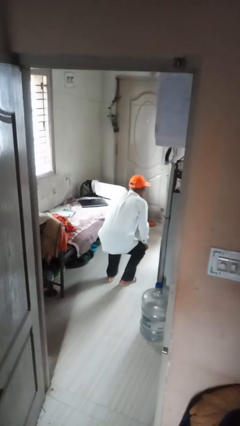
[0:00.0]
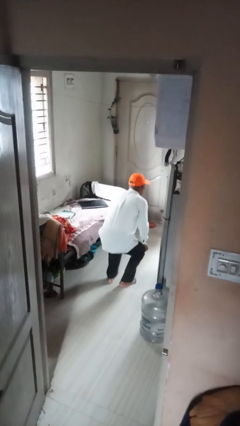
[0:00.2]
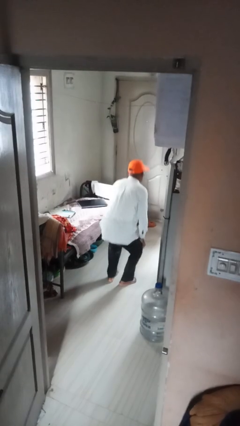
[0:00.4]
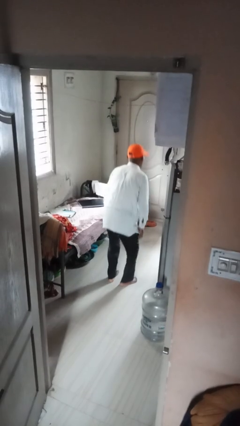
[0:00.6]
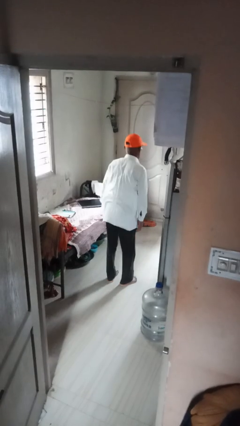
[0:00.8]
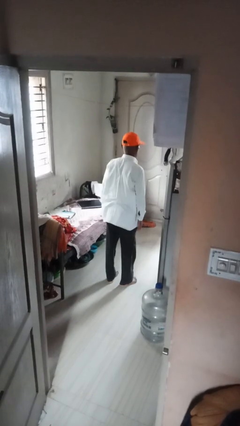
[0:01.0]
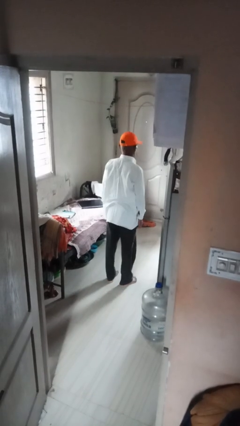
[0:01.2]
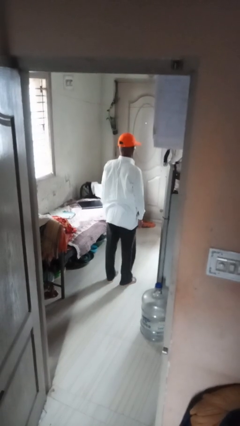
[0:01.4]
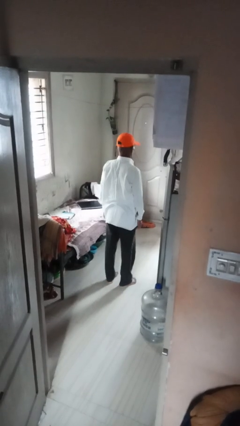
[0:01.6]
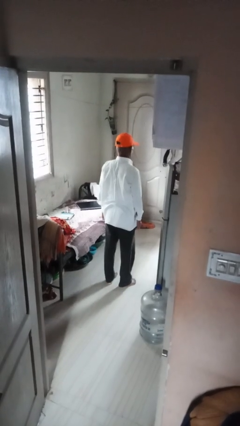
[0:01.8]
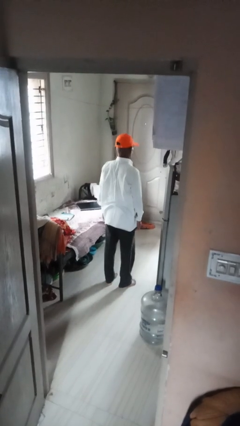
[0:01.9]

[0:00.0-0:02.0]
person stands up

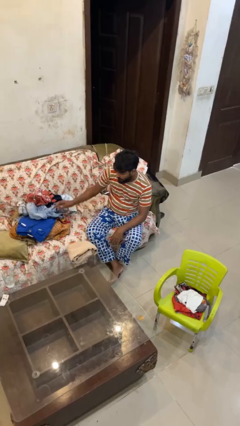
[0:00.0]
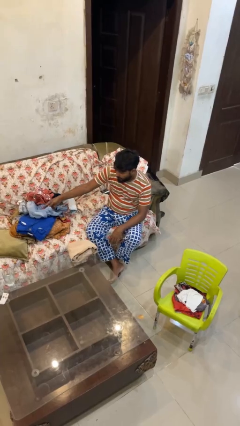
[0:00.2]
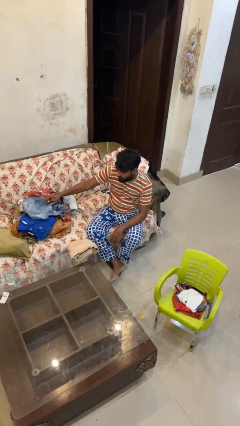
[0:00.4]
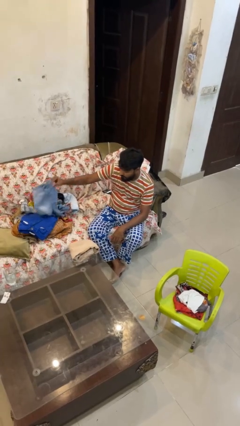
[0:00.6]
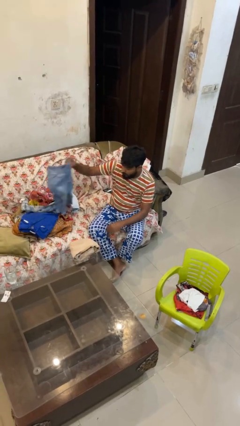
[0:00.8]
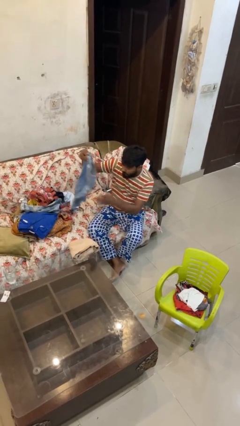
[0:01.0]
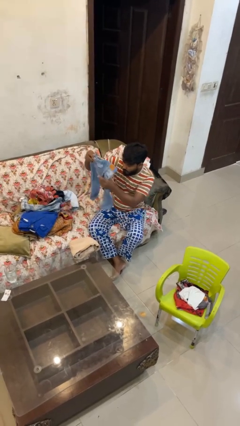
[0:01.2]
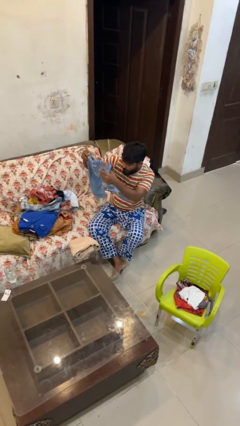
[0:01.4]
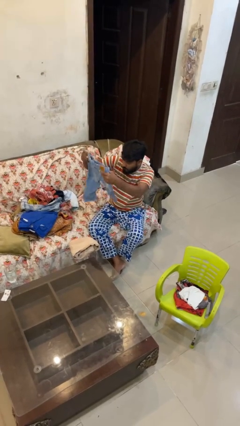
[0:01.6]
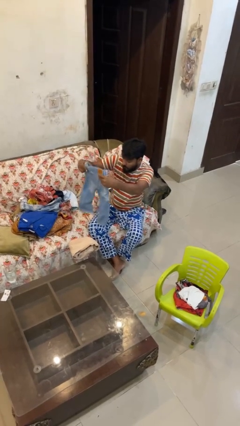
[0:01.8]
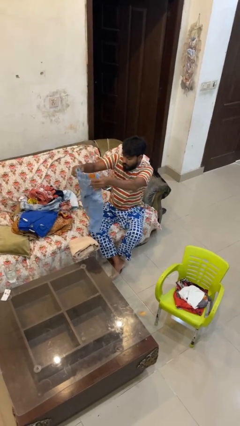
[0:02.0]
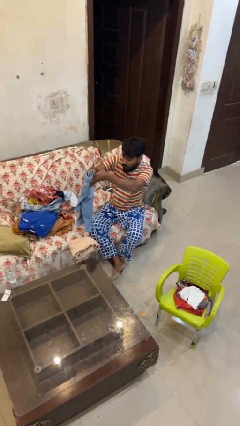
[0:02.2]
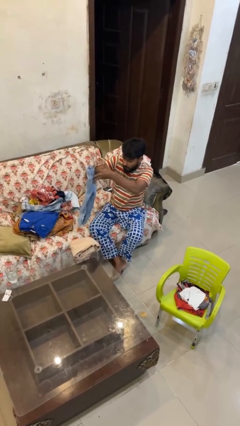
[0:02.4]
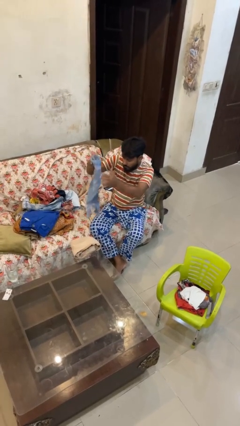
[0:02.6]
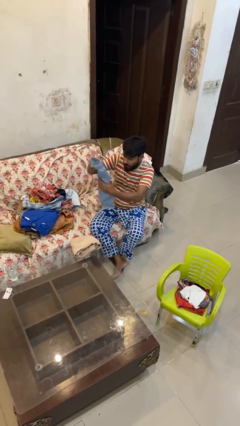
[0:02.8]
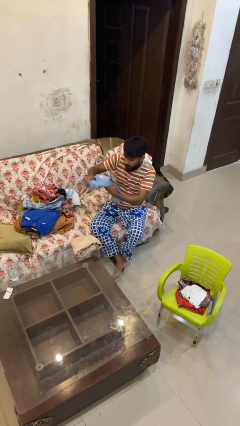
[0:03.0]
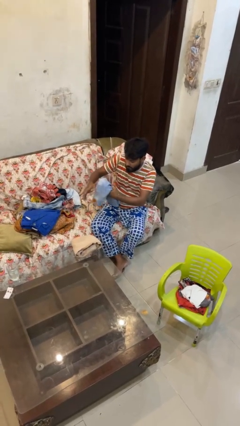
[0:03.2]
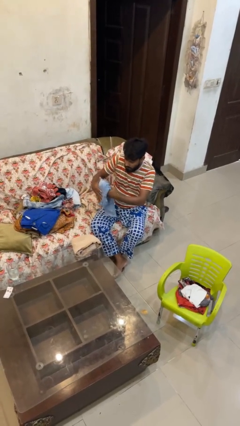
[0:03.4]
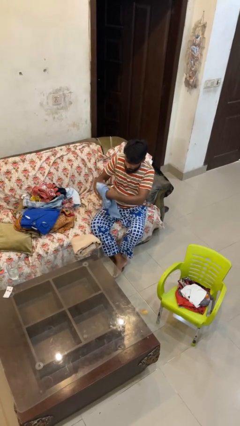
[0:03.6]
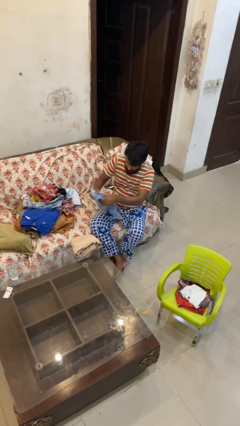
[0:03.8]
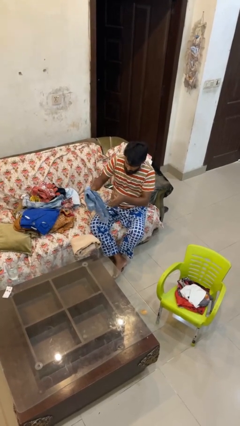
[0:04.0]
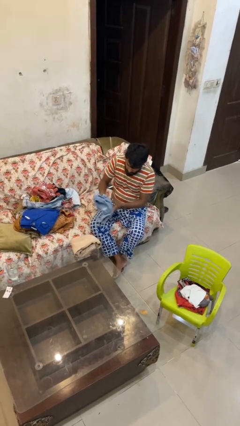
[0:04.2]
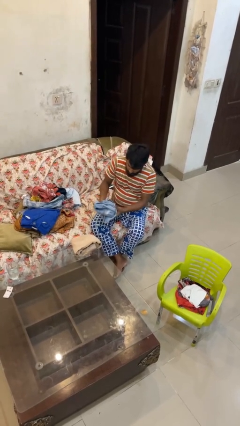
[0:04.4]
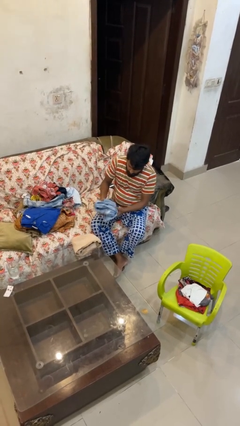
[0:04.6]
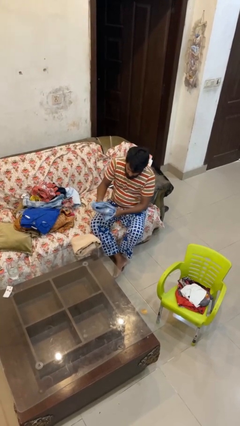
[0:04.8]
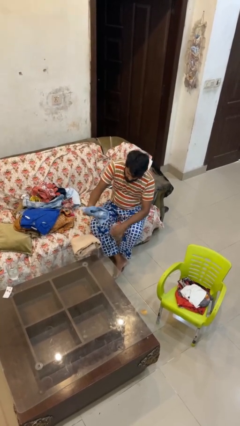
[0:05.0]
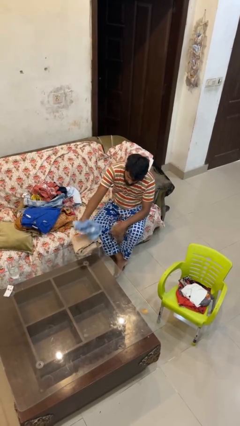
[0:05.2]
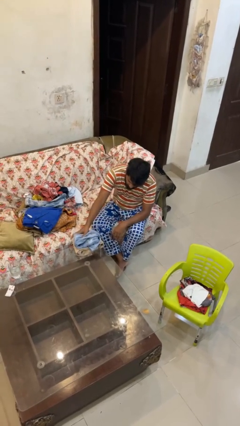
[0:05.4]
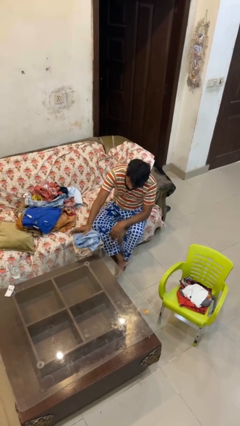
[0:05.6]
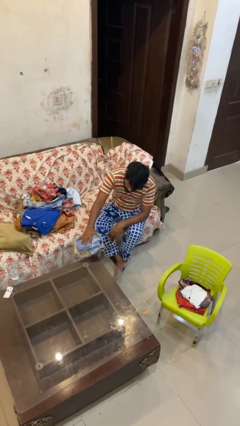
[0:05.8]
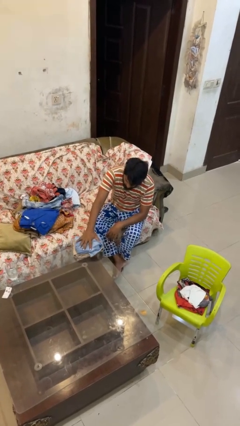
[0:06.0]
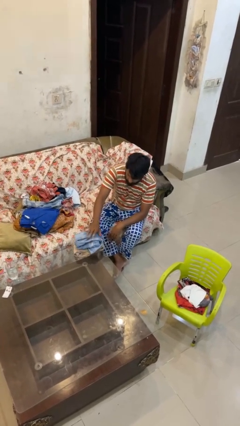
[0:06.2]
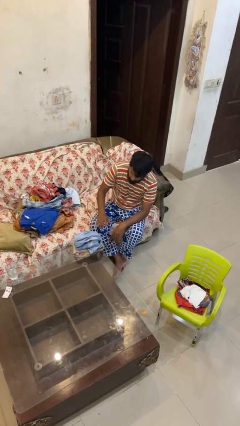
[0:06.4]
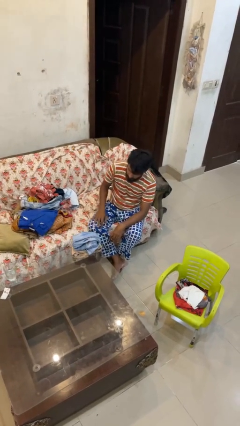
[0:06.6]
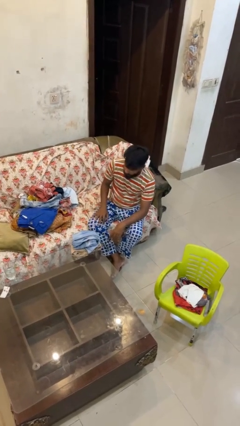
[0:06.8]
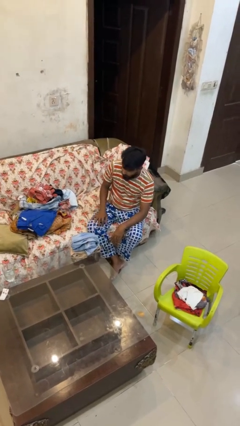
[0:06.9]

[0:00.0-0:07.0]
person folds pants

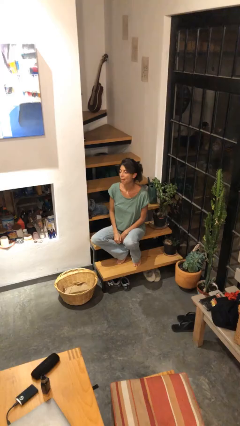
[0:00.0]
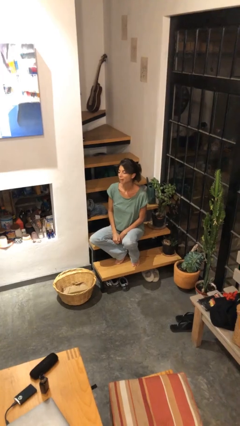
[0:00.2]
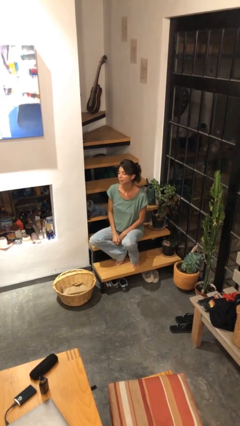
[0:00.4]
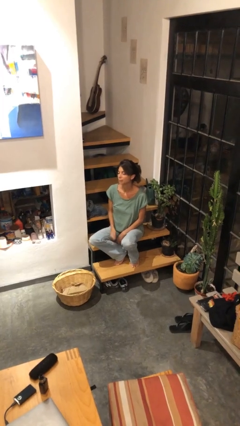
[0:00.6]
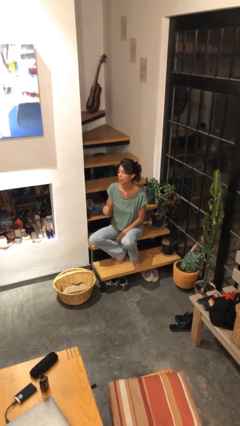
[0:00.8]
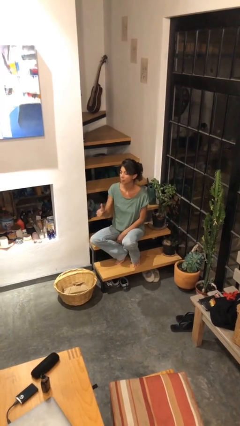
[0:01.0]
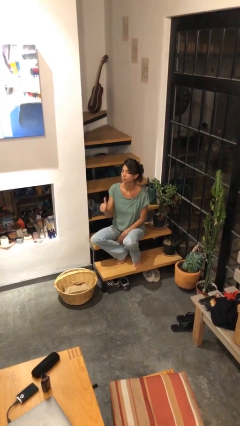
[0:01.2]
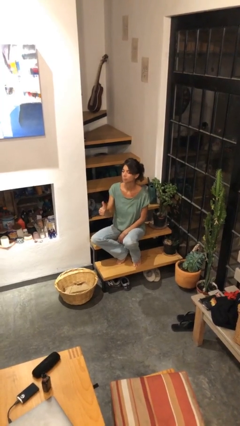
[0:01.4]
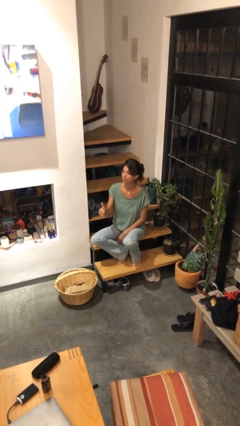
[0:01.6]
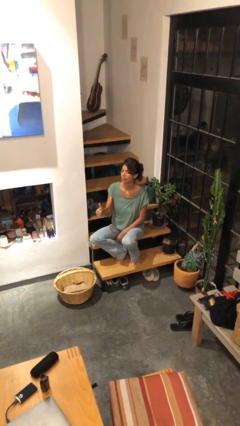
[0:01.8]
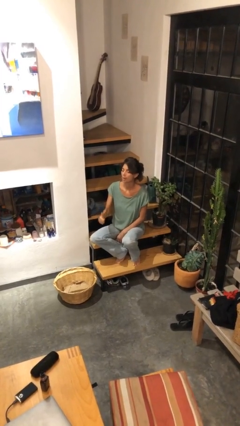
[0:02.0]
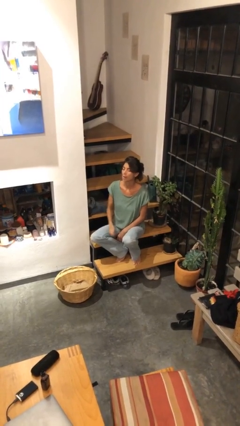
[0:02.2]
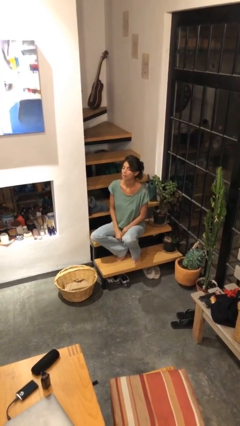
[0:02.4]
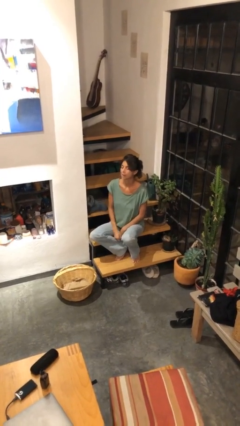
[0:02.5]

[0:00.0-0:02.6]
person gestures thumbs up

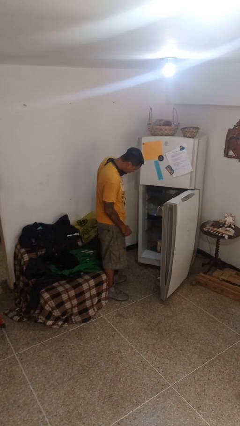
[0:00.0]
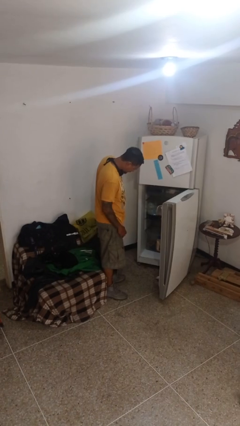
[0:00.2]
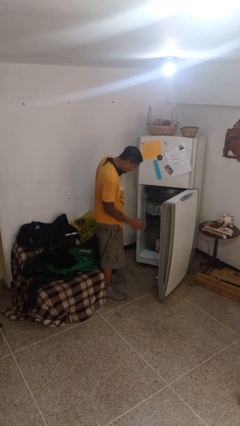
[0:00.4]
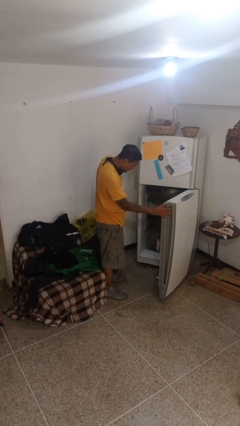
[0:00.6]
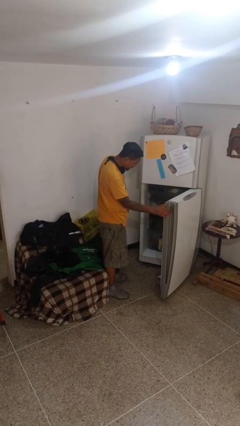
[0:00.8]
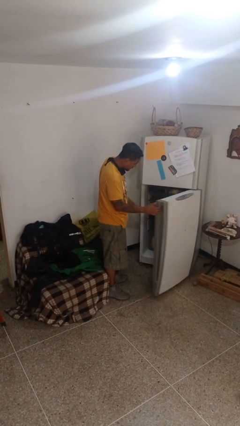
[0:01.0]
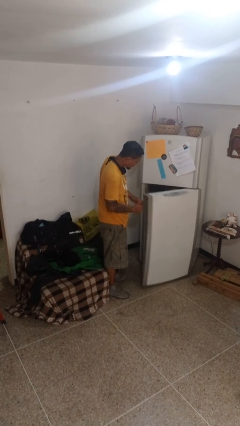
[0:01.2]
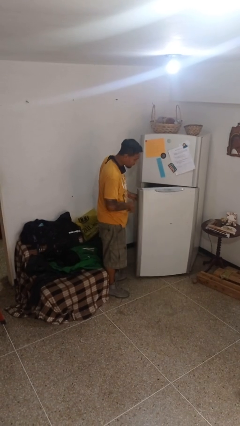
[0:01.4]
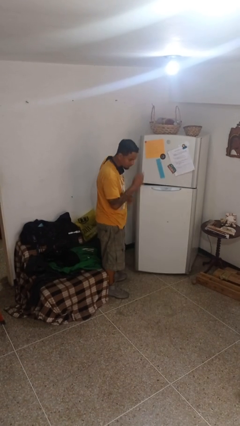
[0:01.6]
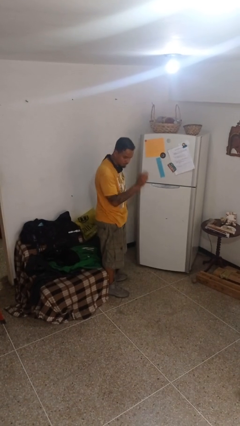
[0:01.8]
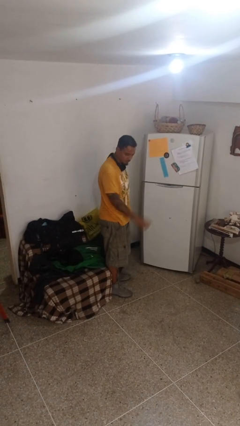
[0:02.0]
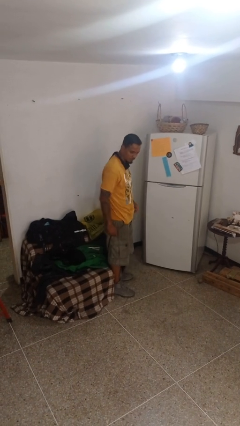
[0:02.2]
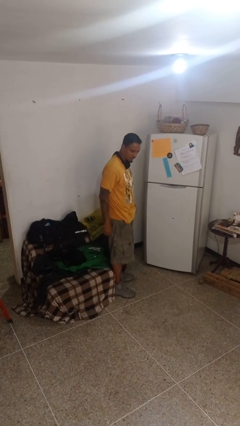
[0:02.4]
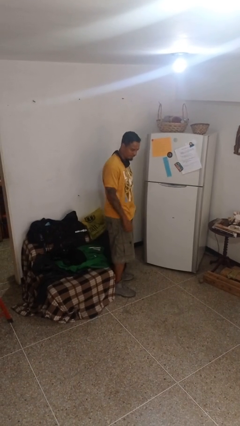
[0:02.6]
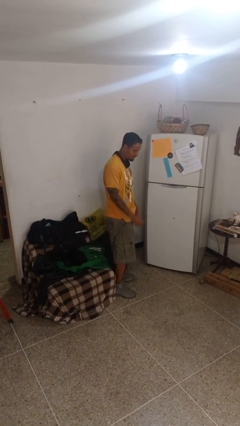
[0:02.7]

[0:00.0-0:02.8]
person closes refrigerator

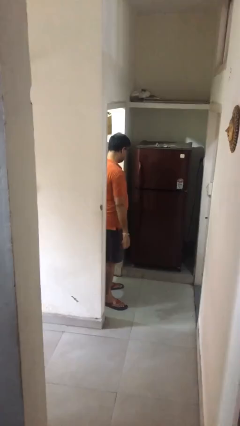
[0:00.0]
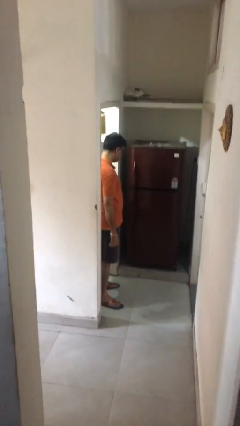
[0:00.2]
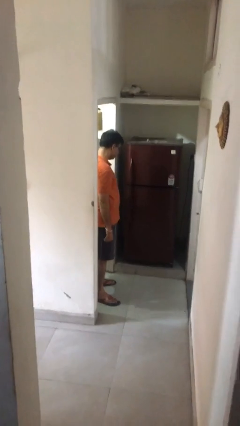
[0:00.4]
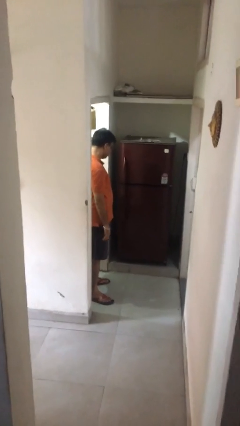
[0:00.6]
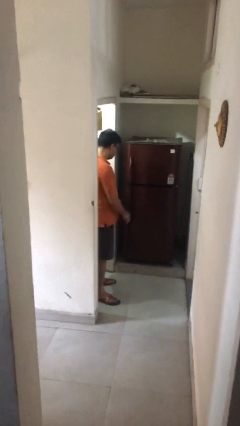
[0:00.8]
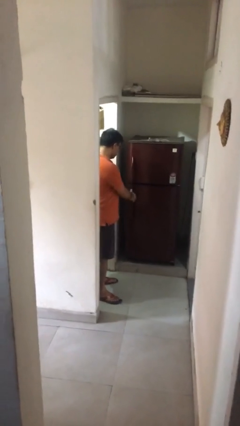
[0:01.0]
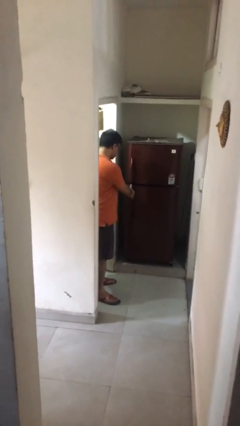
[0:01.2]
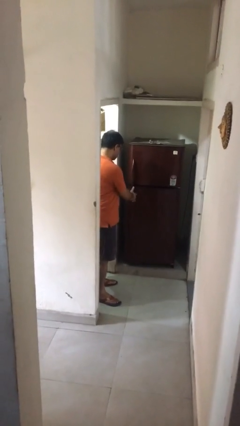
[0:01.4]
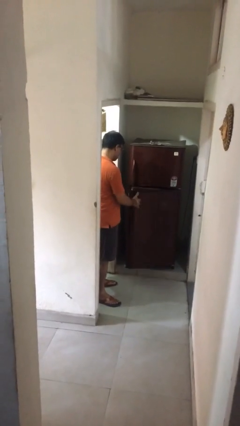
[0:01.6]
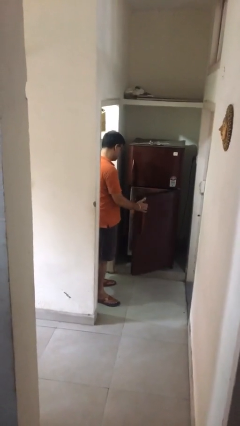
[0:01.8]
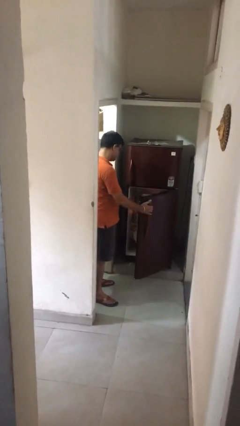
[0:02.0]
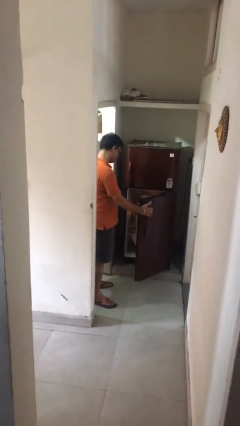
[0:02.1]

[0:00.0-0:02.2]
person opens refrigerator

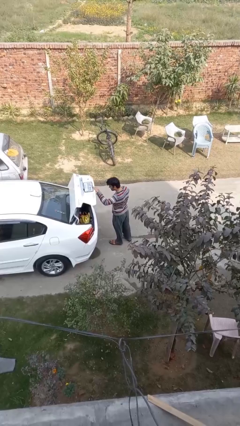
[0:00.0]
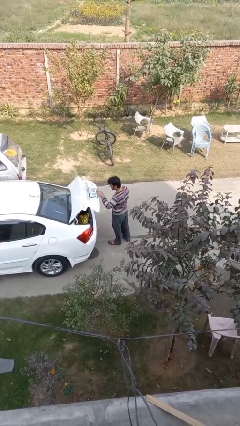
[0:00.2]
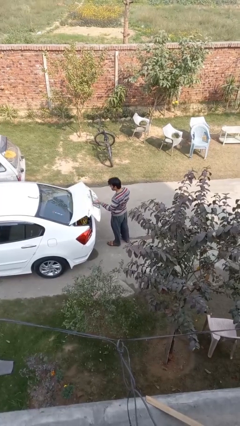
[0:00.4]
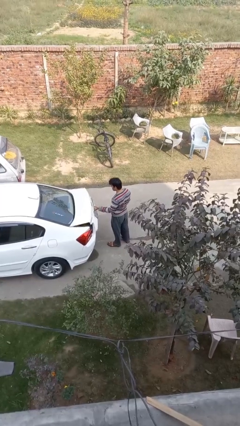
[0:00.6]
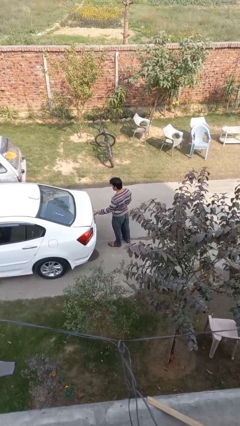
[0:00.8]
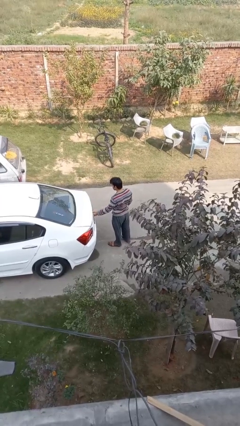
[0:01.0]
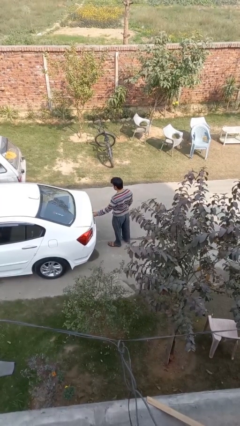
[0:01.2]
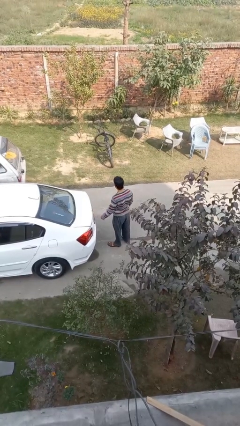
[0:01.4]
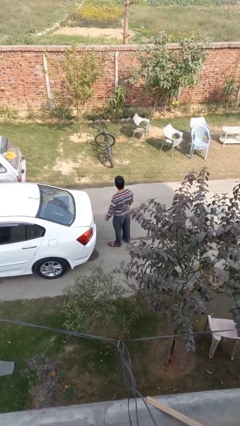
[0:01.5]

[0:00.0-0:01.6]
person closes car trunk
